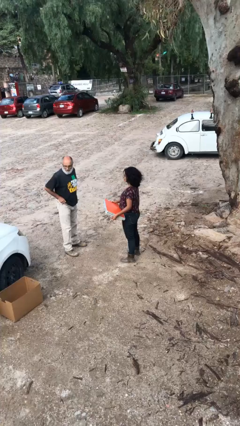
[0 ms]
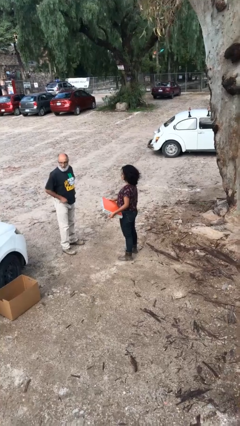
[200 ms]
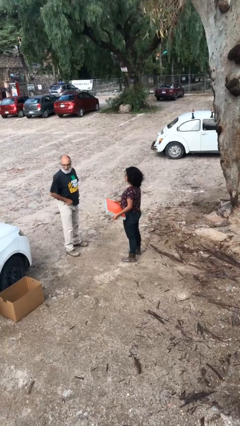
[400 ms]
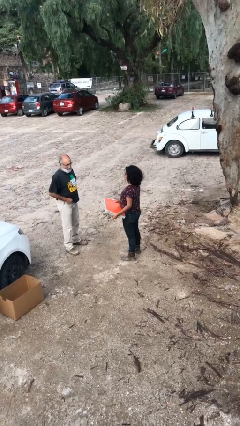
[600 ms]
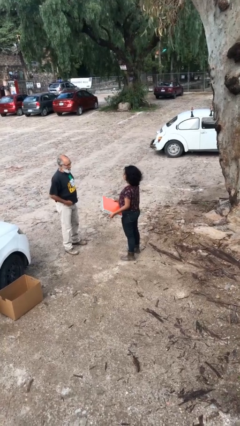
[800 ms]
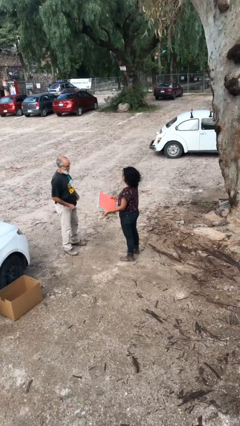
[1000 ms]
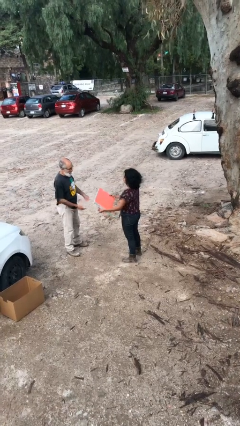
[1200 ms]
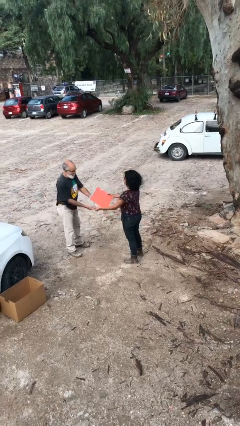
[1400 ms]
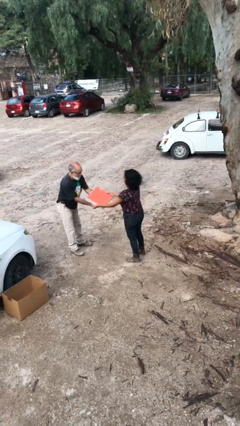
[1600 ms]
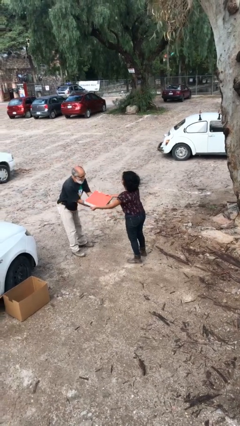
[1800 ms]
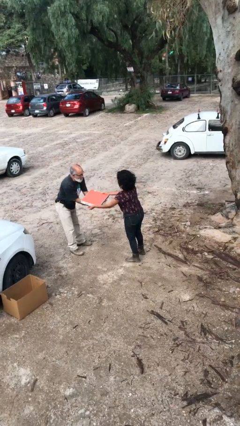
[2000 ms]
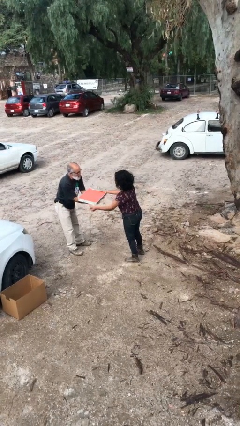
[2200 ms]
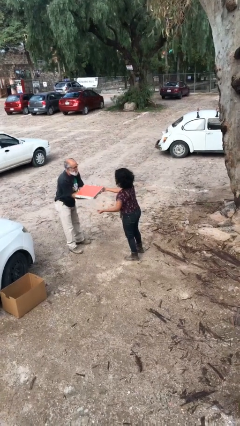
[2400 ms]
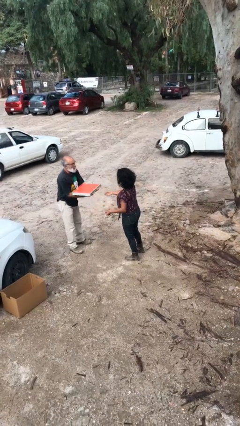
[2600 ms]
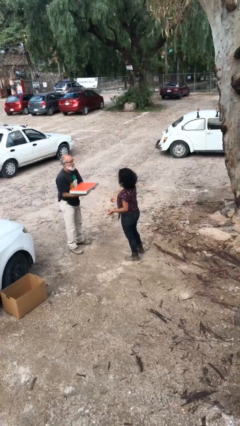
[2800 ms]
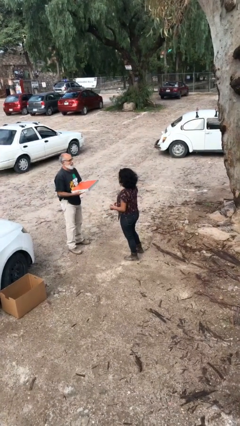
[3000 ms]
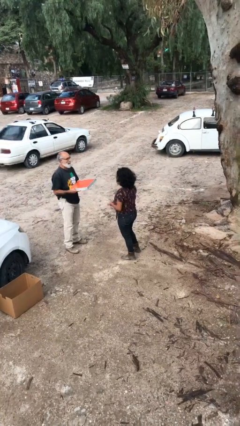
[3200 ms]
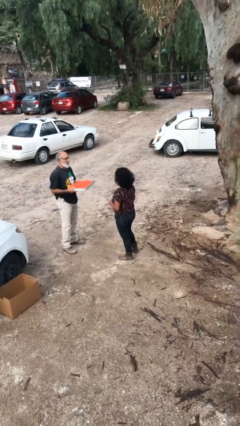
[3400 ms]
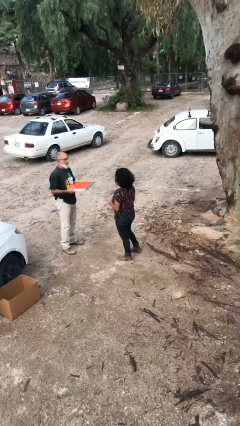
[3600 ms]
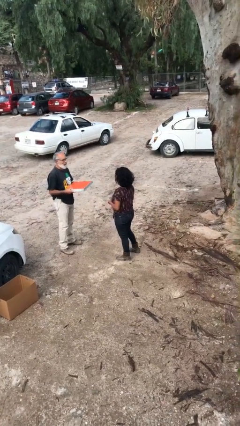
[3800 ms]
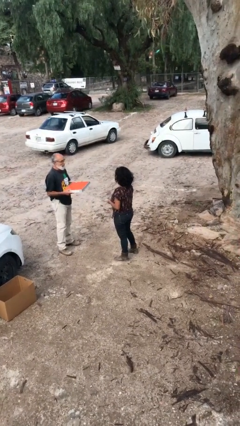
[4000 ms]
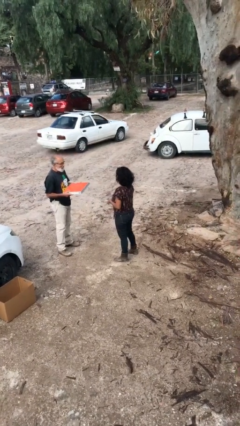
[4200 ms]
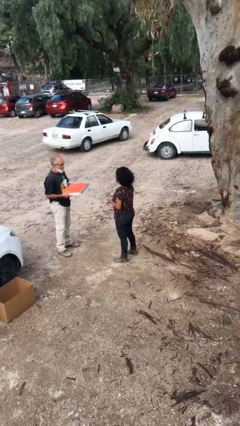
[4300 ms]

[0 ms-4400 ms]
person transfers object to person

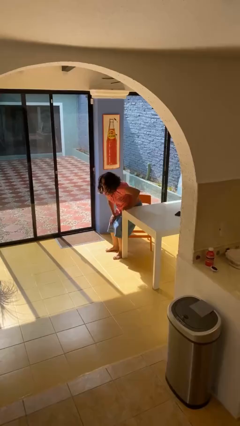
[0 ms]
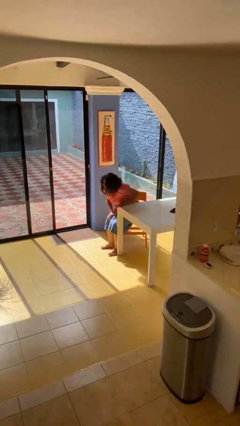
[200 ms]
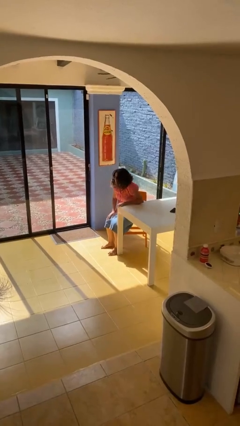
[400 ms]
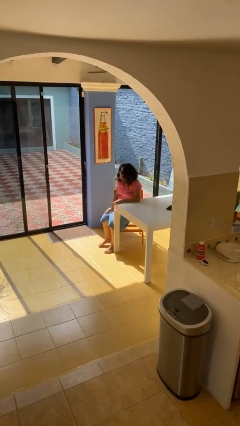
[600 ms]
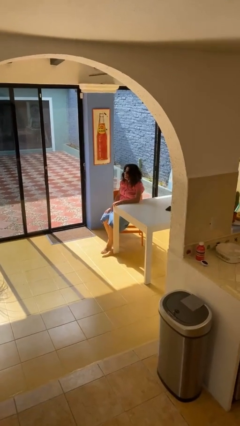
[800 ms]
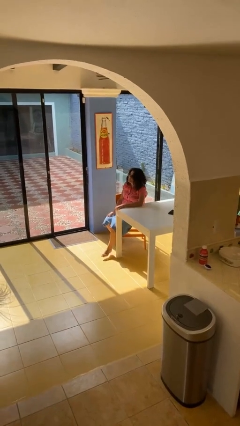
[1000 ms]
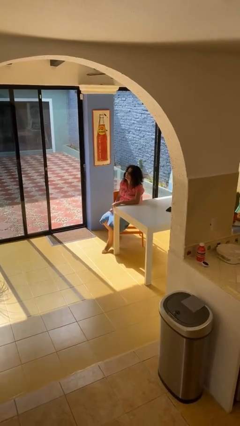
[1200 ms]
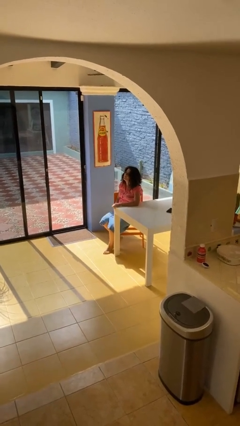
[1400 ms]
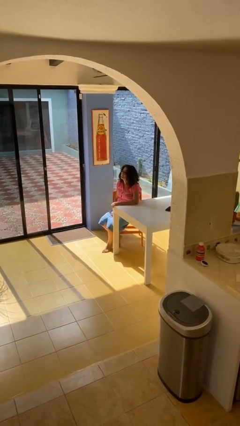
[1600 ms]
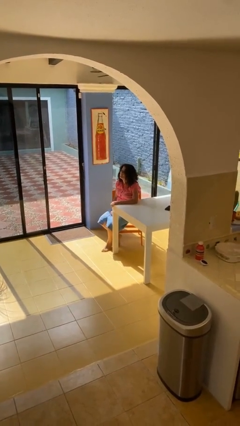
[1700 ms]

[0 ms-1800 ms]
person sits down

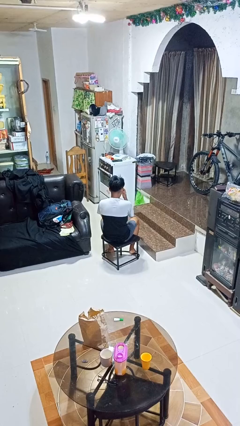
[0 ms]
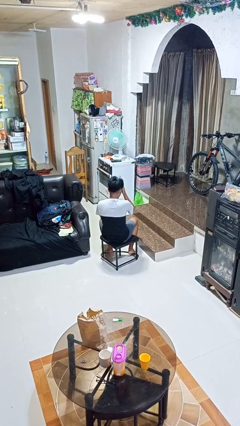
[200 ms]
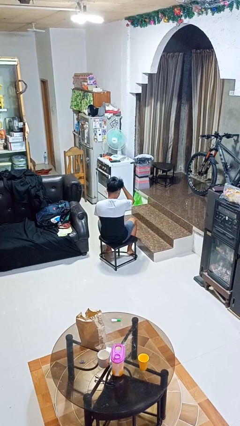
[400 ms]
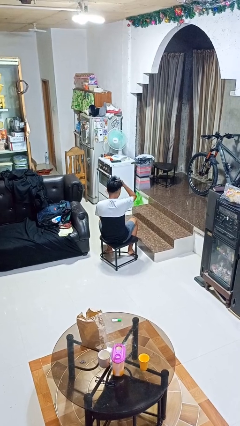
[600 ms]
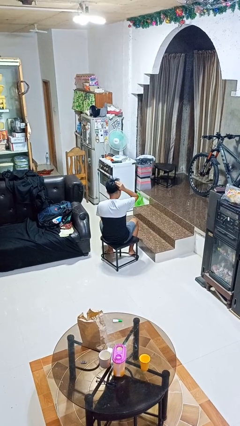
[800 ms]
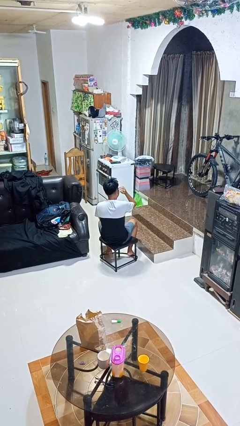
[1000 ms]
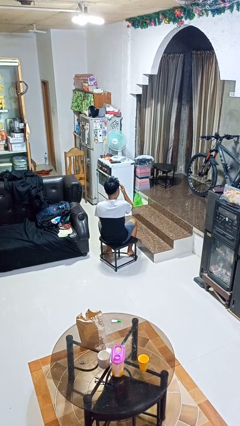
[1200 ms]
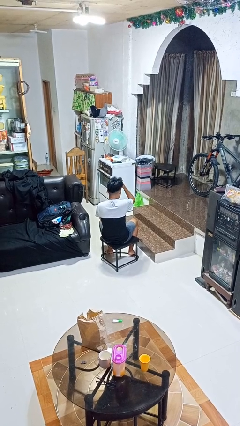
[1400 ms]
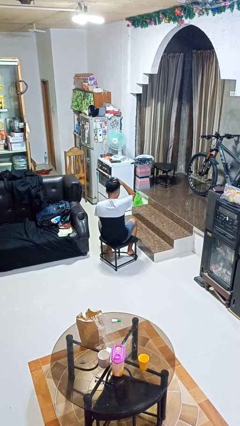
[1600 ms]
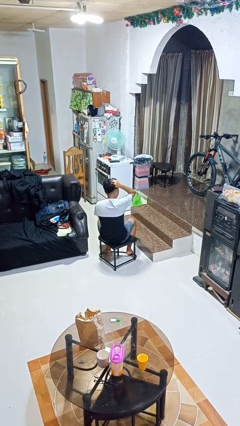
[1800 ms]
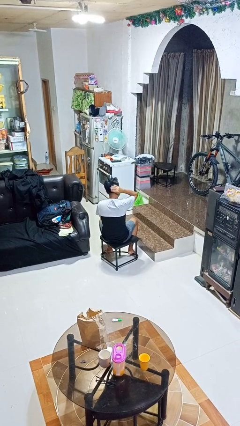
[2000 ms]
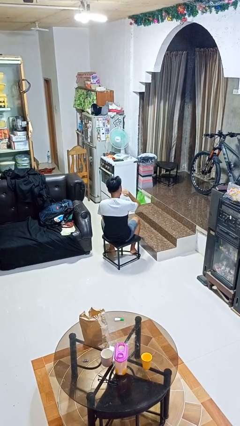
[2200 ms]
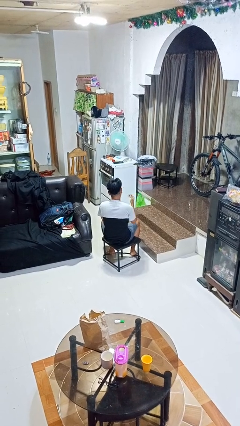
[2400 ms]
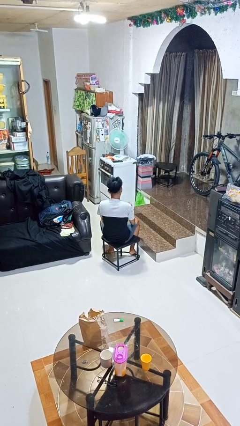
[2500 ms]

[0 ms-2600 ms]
person strokes hair

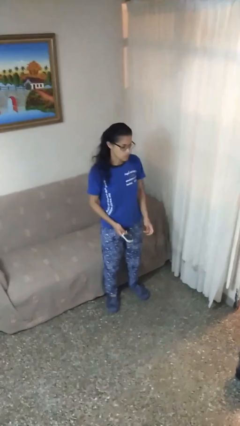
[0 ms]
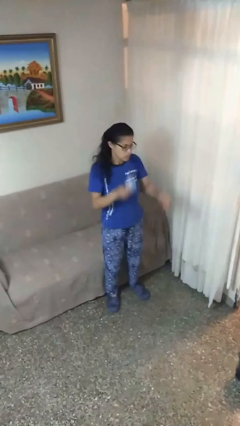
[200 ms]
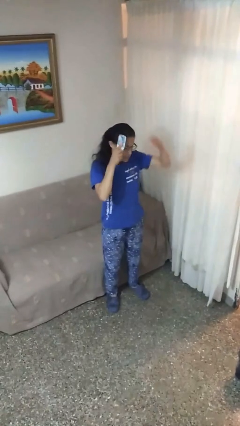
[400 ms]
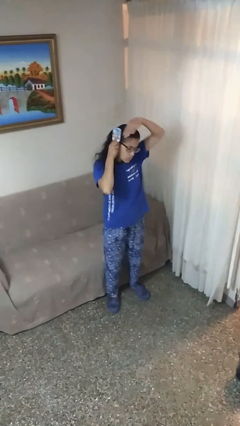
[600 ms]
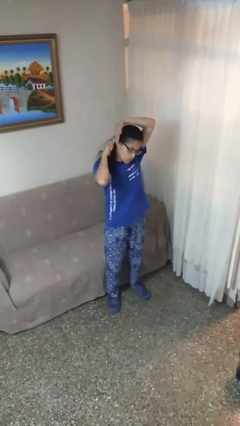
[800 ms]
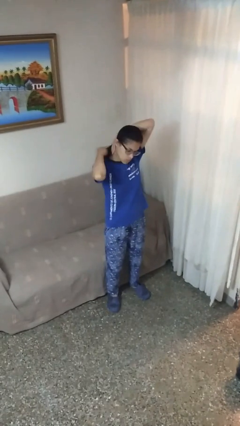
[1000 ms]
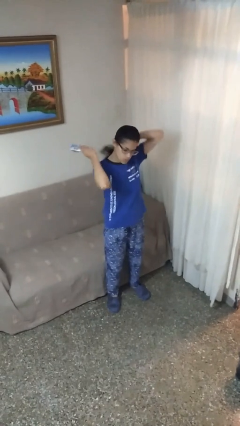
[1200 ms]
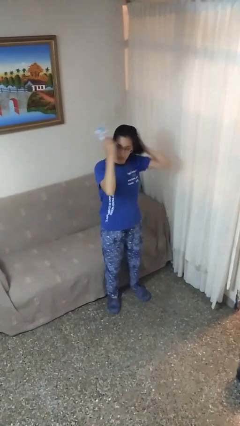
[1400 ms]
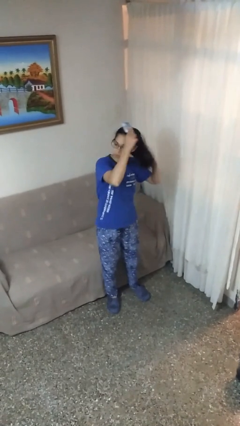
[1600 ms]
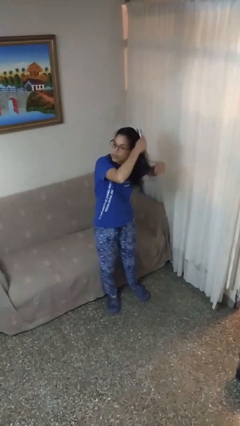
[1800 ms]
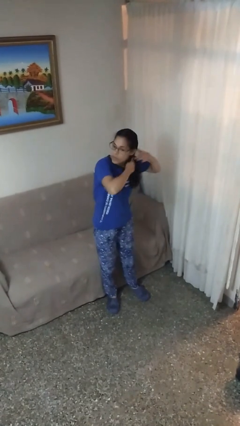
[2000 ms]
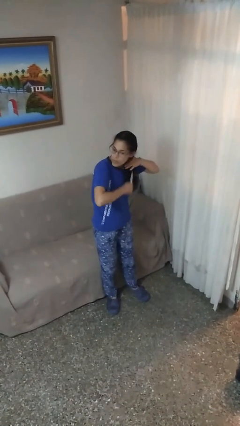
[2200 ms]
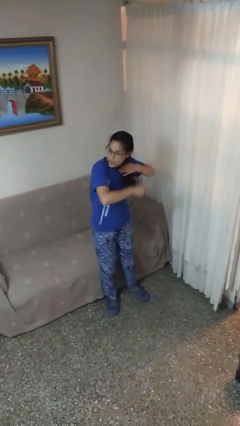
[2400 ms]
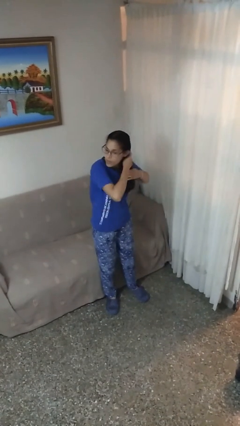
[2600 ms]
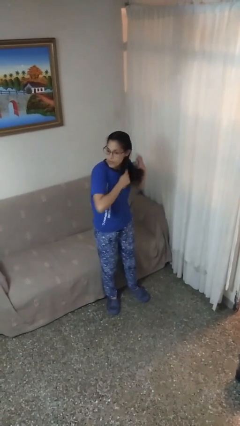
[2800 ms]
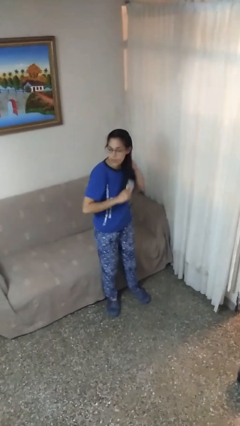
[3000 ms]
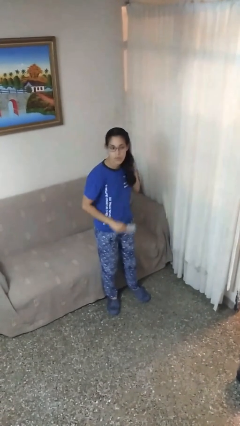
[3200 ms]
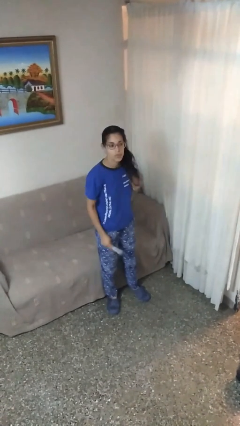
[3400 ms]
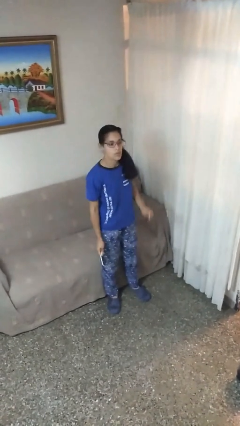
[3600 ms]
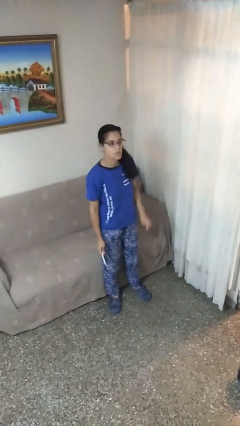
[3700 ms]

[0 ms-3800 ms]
person brushes hair

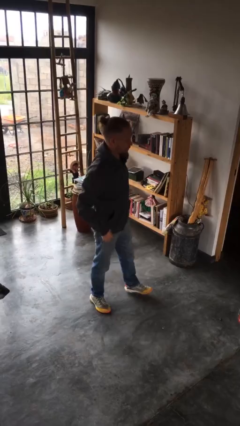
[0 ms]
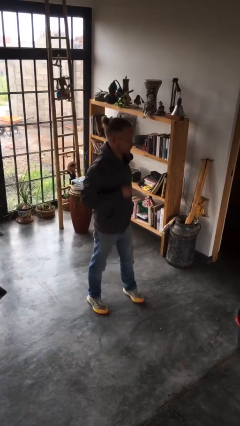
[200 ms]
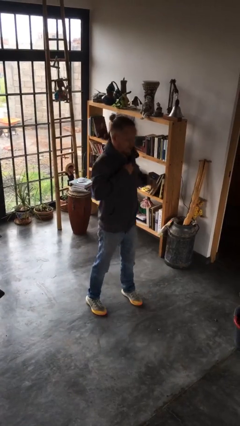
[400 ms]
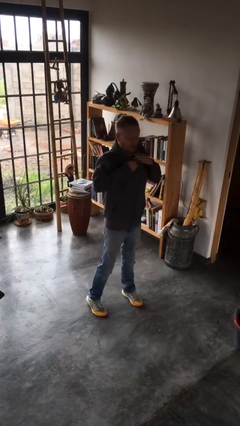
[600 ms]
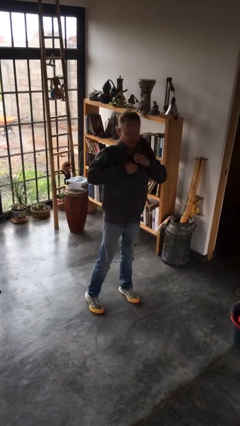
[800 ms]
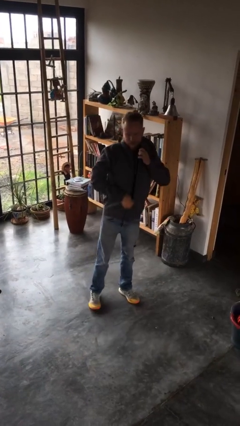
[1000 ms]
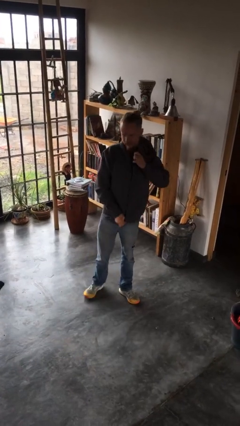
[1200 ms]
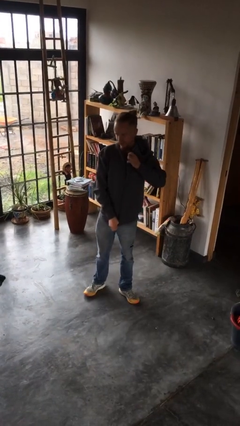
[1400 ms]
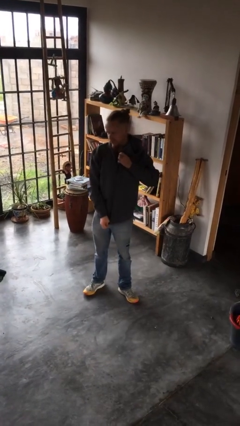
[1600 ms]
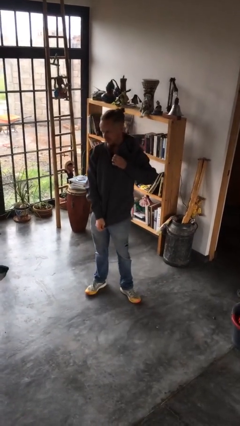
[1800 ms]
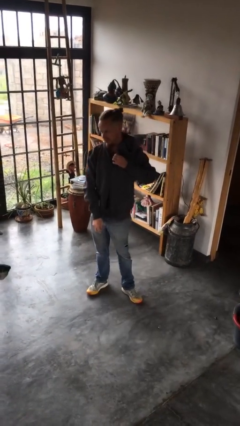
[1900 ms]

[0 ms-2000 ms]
person unzips jacket

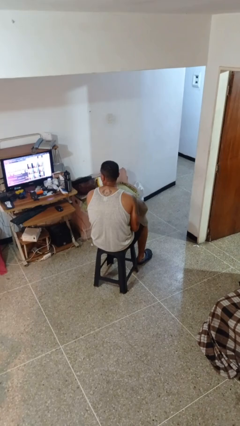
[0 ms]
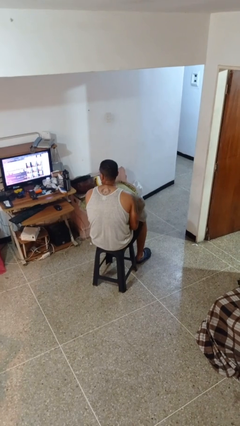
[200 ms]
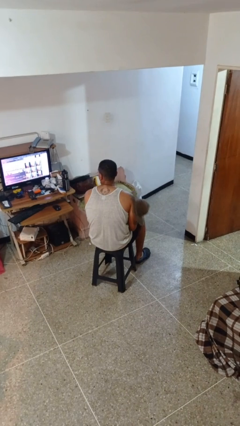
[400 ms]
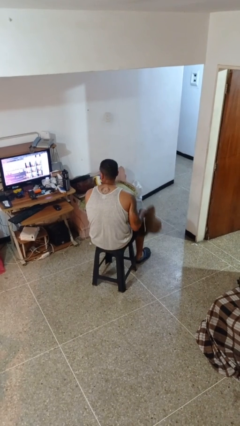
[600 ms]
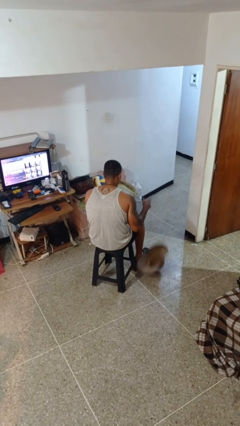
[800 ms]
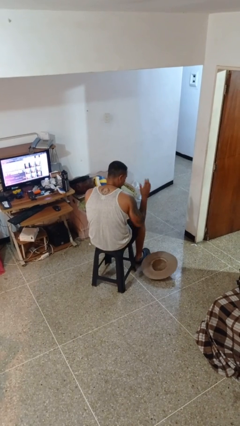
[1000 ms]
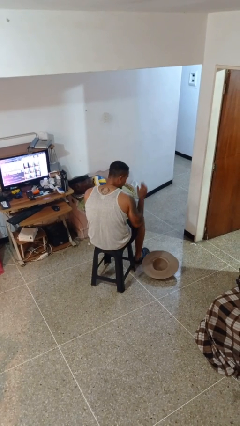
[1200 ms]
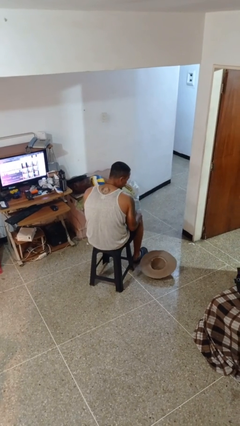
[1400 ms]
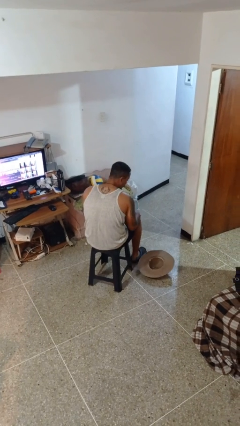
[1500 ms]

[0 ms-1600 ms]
person drops object

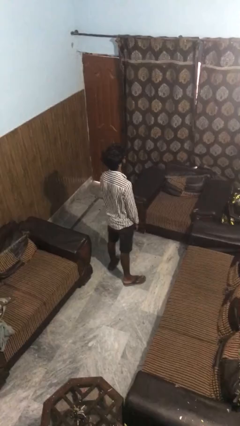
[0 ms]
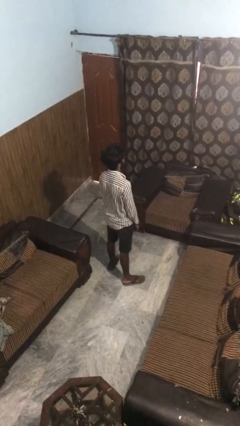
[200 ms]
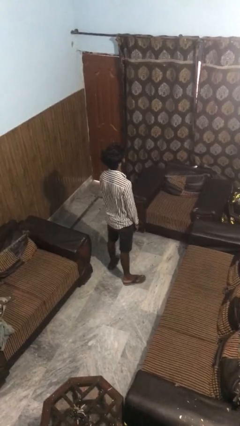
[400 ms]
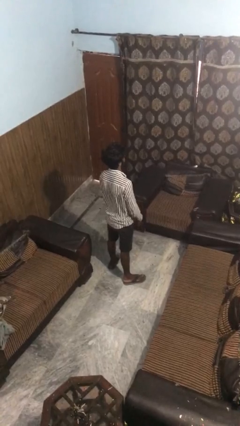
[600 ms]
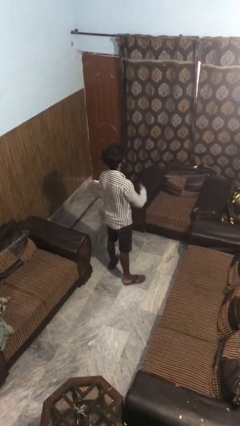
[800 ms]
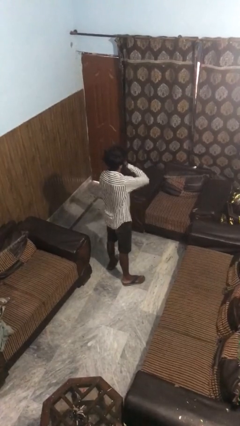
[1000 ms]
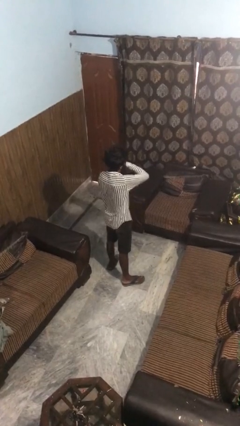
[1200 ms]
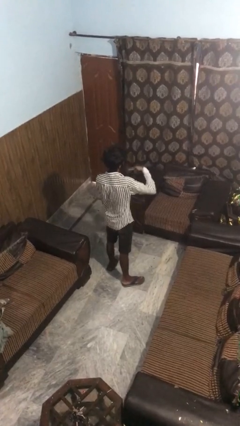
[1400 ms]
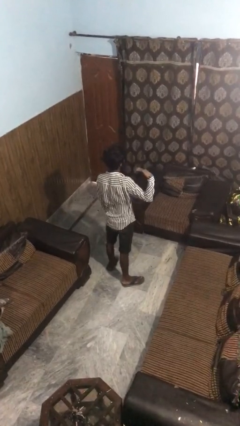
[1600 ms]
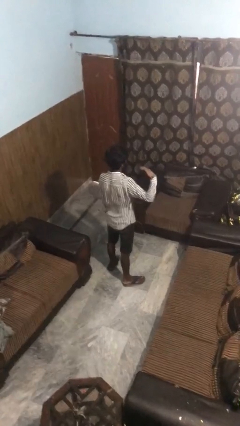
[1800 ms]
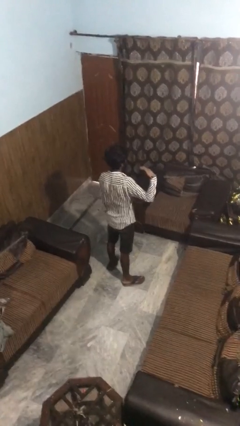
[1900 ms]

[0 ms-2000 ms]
person gestures cut
